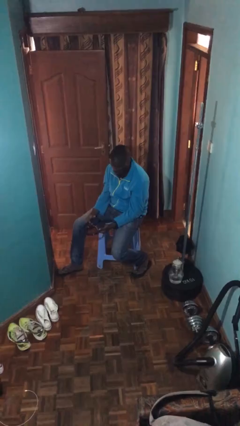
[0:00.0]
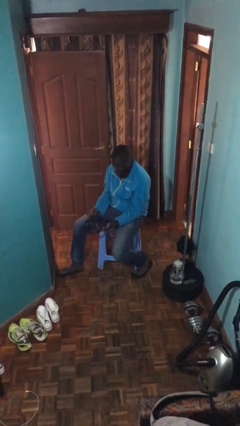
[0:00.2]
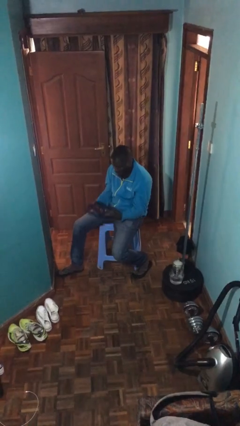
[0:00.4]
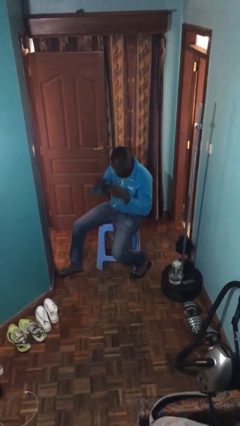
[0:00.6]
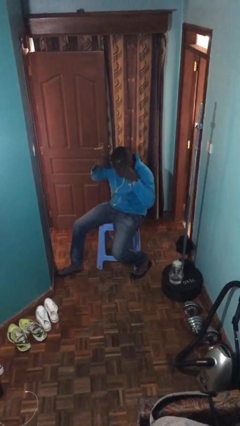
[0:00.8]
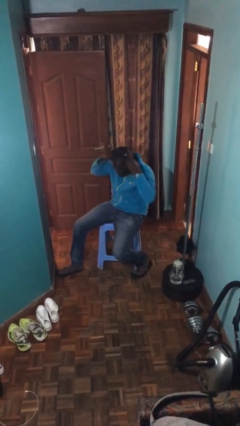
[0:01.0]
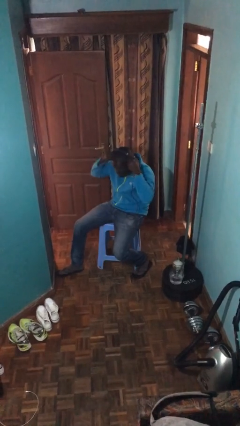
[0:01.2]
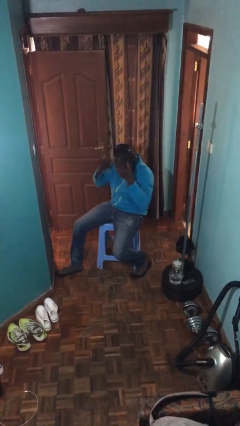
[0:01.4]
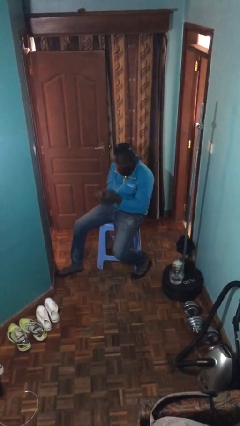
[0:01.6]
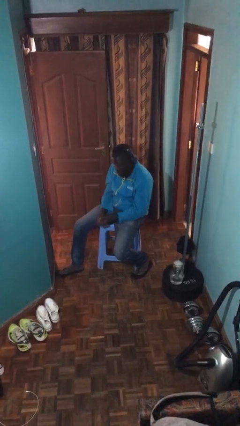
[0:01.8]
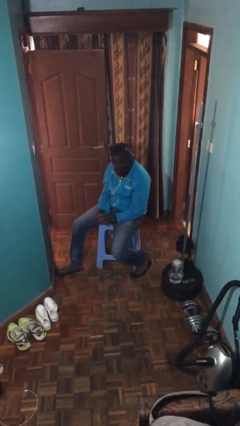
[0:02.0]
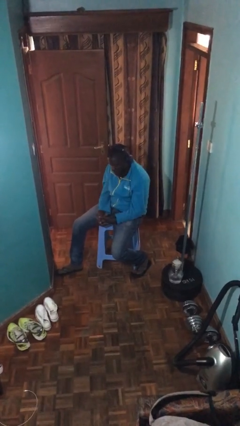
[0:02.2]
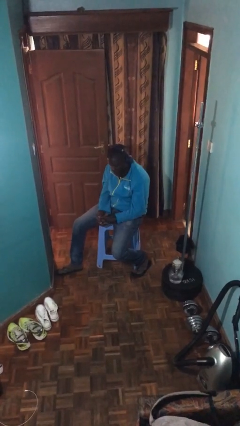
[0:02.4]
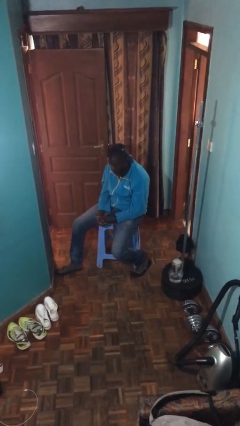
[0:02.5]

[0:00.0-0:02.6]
person puts on headphones

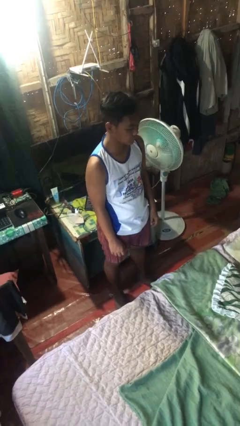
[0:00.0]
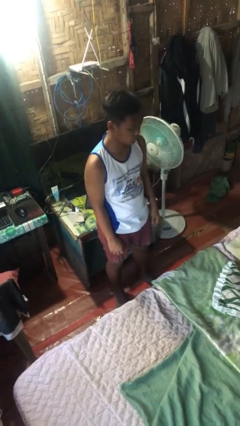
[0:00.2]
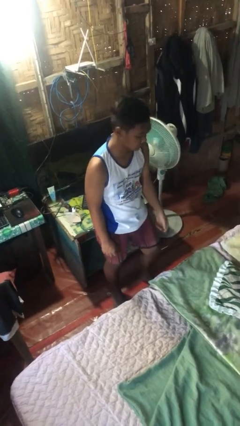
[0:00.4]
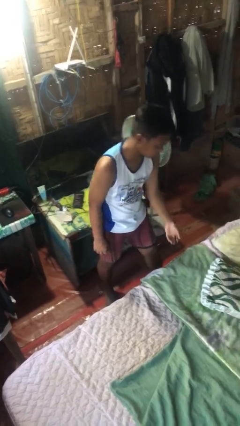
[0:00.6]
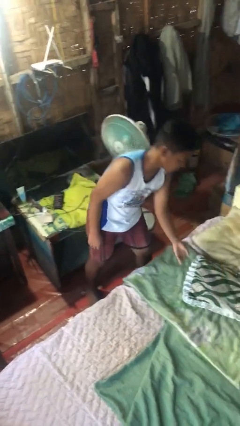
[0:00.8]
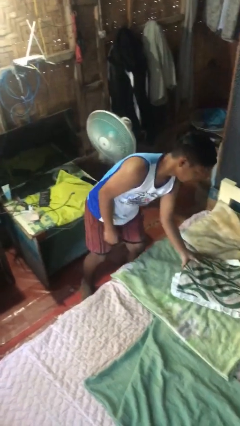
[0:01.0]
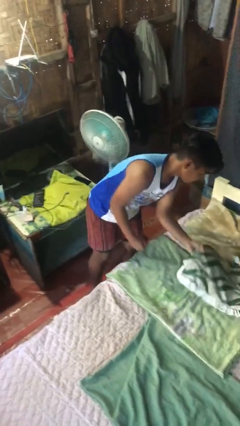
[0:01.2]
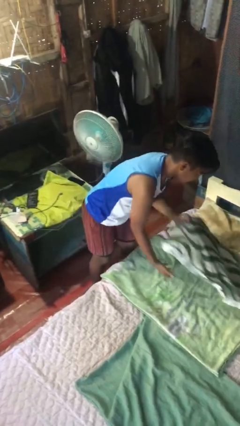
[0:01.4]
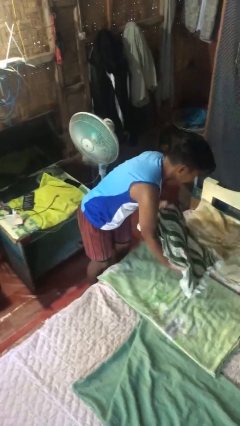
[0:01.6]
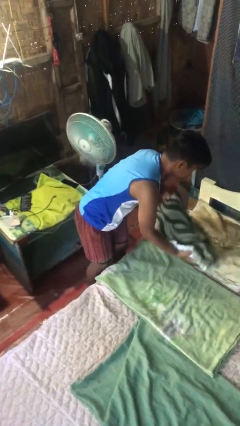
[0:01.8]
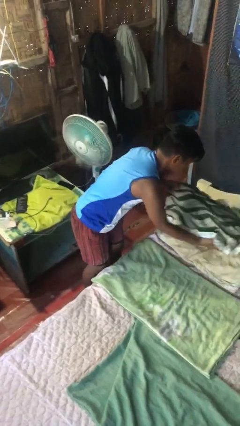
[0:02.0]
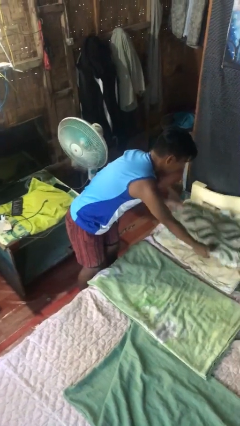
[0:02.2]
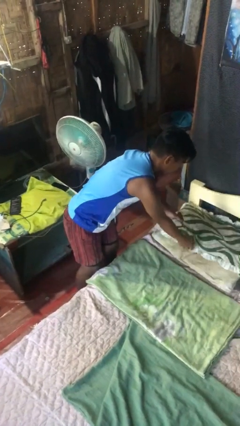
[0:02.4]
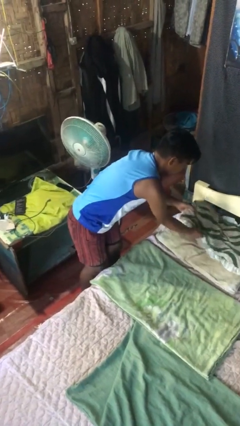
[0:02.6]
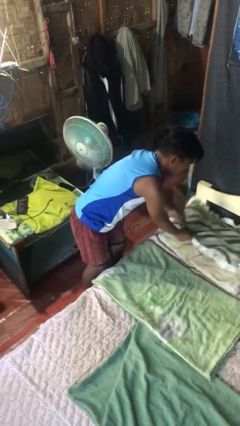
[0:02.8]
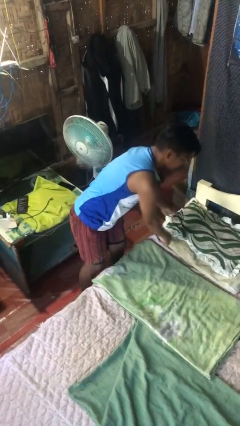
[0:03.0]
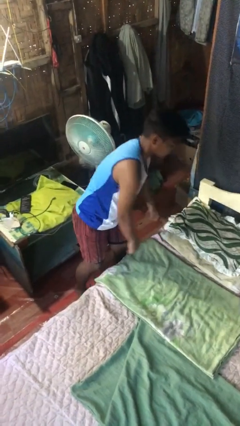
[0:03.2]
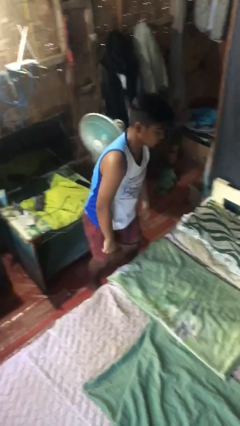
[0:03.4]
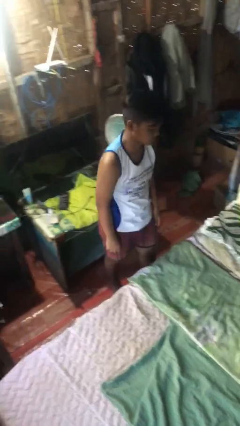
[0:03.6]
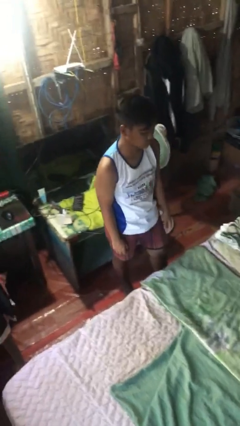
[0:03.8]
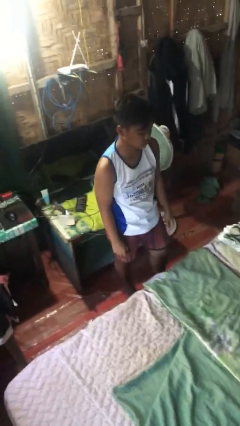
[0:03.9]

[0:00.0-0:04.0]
person makes bed

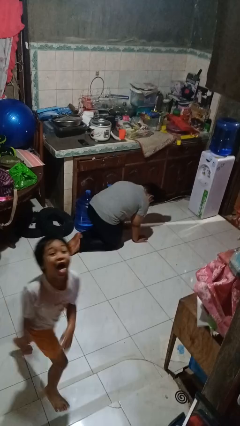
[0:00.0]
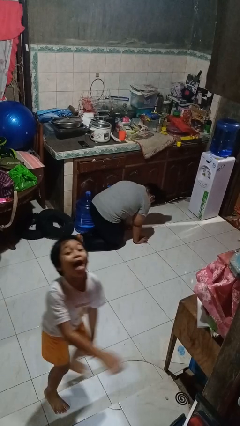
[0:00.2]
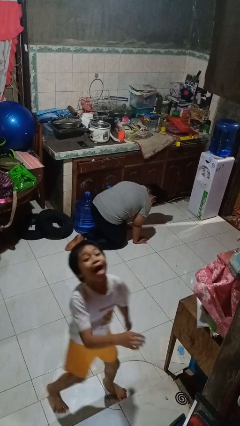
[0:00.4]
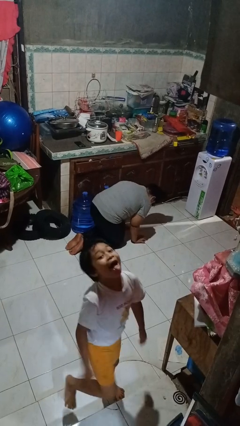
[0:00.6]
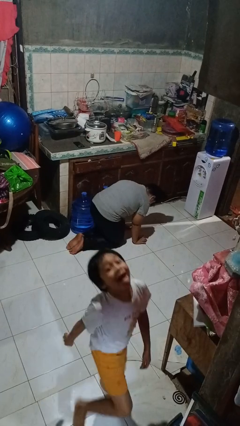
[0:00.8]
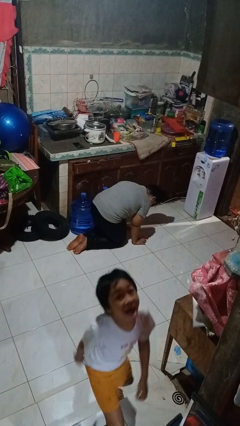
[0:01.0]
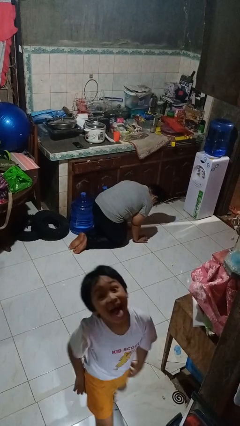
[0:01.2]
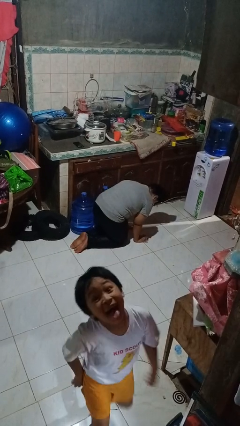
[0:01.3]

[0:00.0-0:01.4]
person crawls

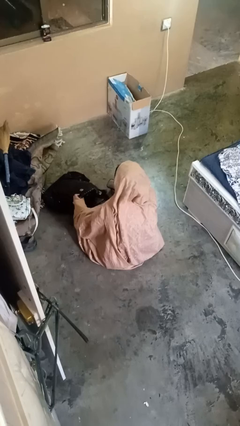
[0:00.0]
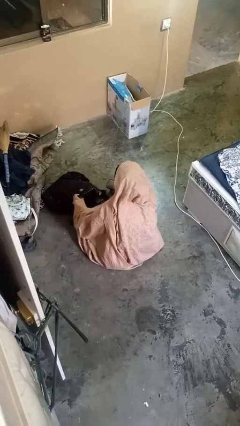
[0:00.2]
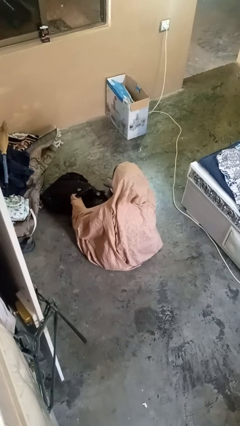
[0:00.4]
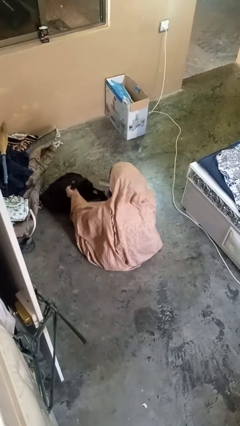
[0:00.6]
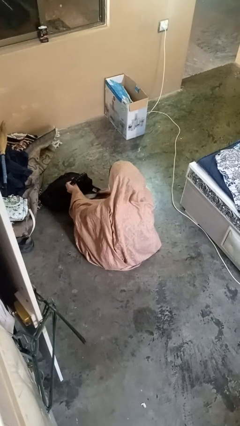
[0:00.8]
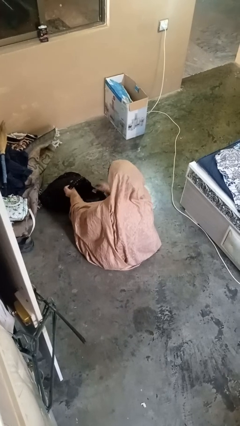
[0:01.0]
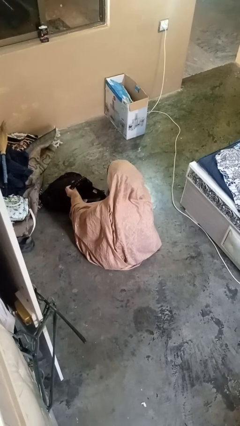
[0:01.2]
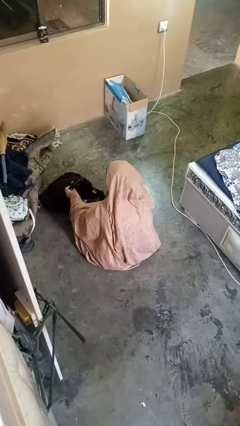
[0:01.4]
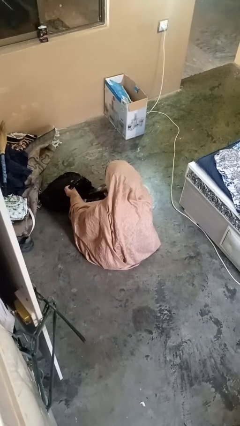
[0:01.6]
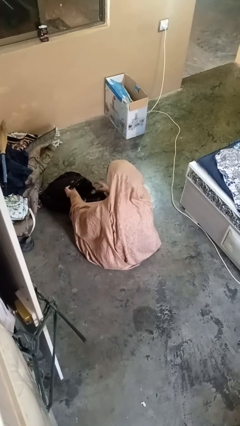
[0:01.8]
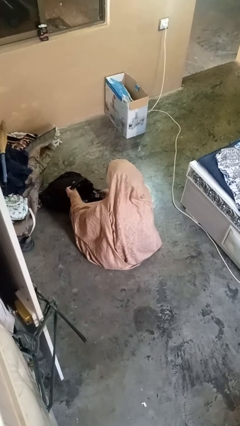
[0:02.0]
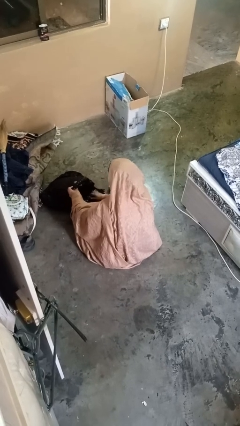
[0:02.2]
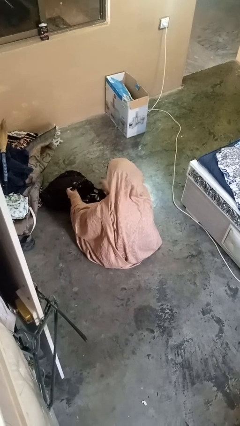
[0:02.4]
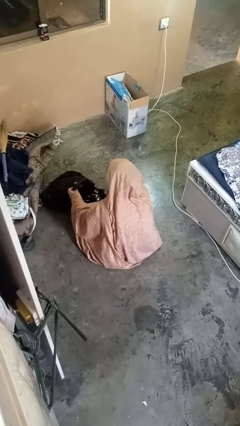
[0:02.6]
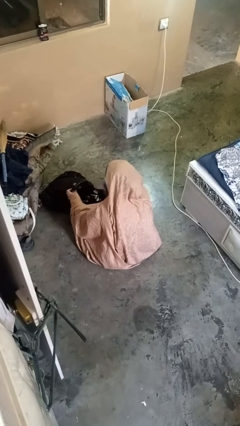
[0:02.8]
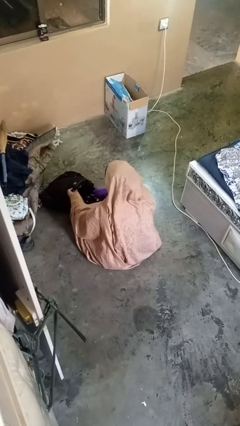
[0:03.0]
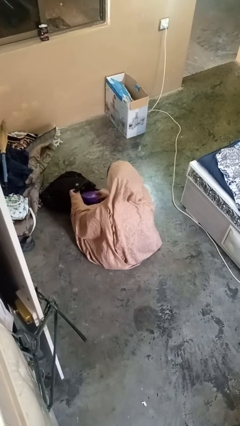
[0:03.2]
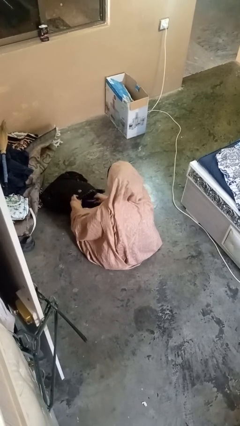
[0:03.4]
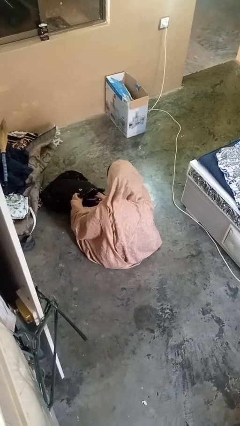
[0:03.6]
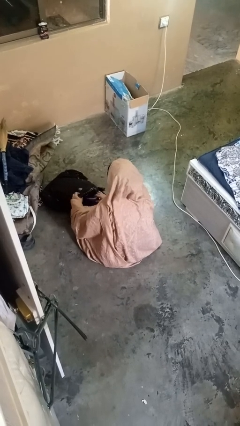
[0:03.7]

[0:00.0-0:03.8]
person puts object into backpack

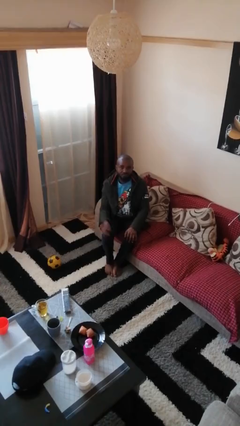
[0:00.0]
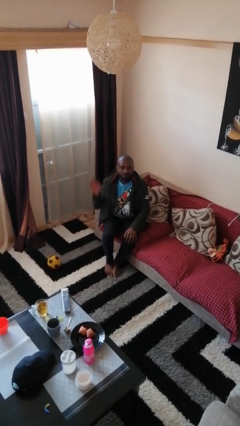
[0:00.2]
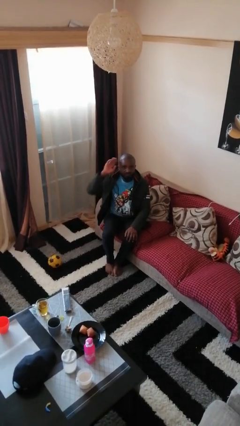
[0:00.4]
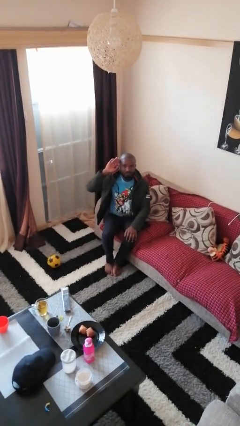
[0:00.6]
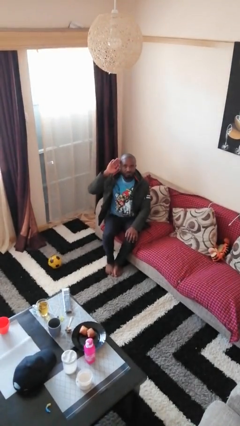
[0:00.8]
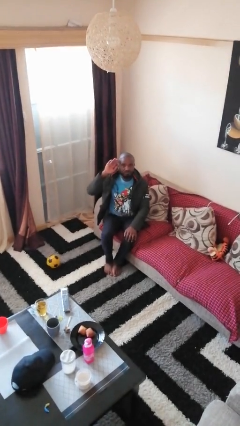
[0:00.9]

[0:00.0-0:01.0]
person salutes

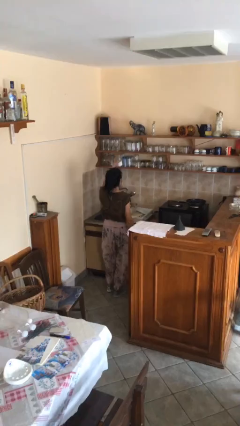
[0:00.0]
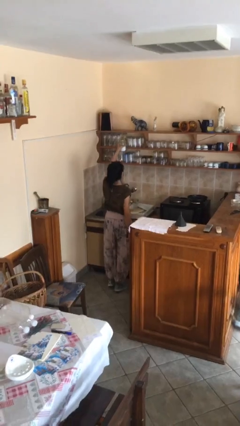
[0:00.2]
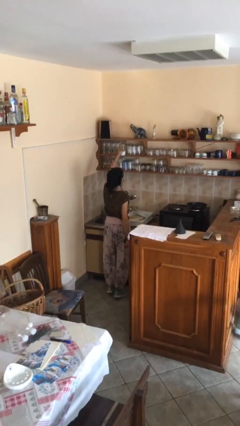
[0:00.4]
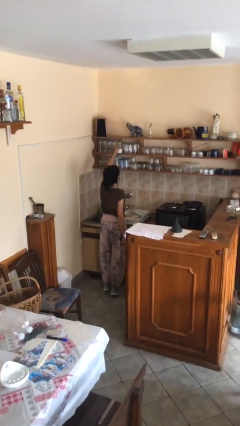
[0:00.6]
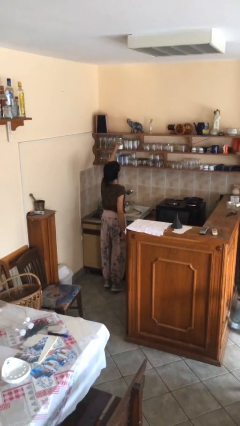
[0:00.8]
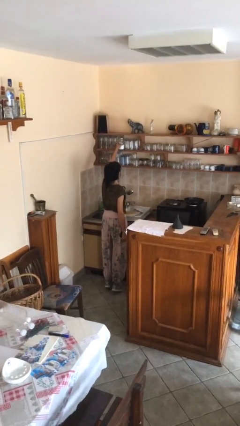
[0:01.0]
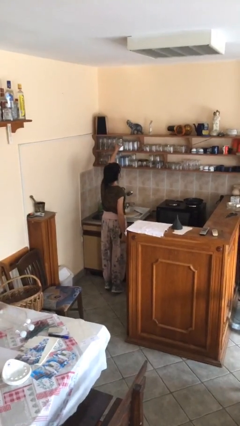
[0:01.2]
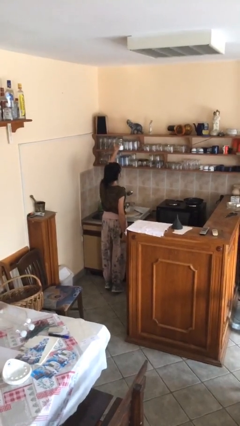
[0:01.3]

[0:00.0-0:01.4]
person puts down object on shelf

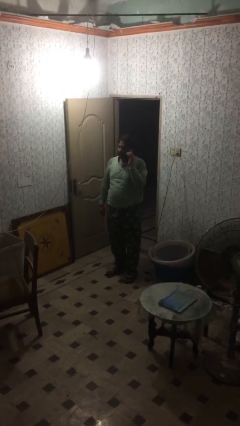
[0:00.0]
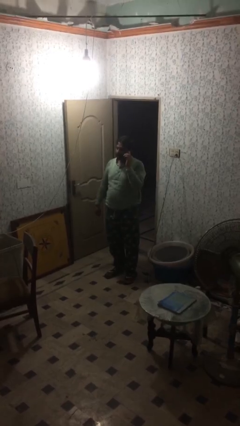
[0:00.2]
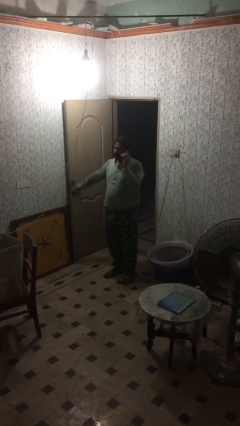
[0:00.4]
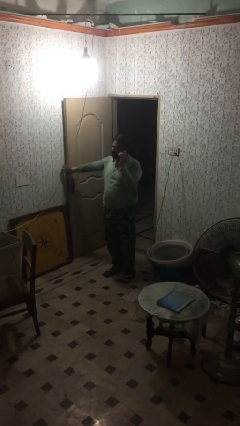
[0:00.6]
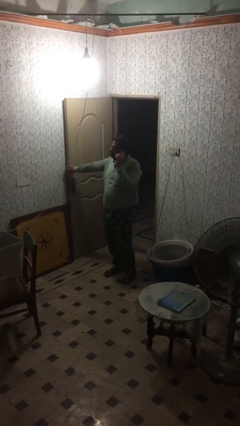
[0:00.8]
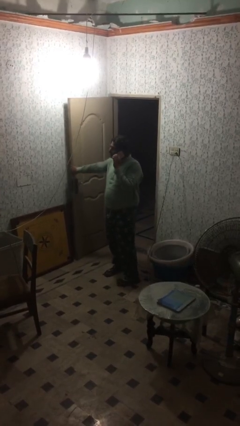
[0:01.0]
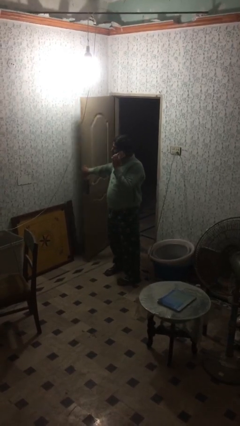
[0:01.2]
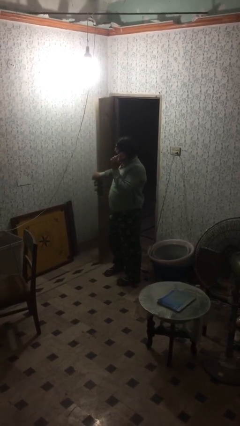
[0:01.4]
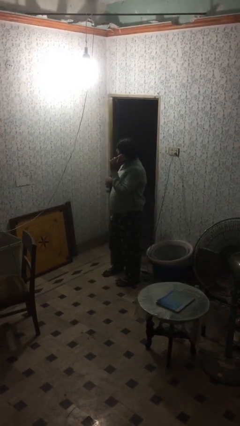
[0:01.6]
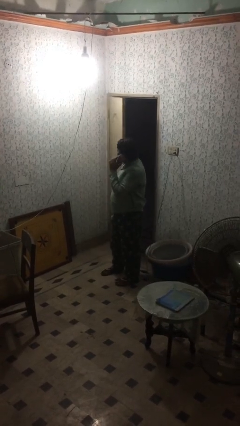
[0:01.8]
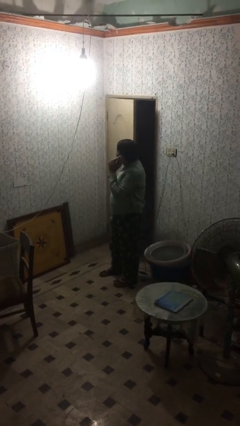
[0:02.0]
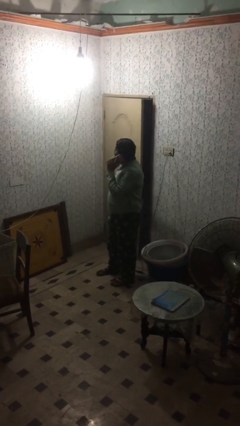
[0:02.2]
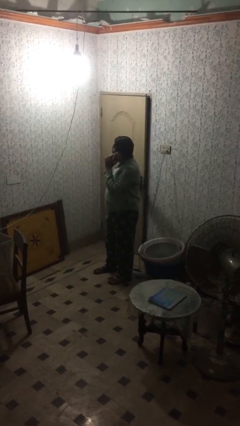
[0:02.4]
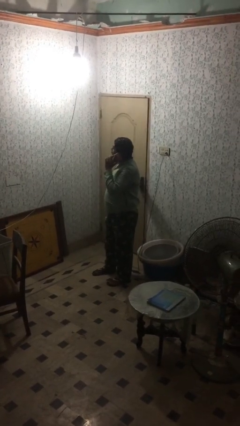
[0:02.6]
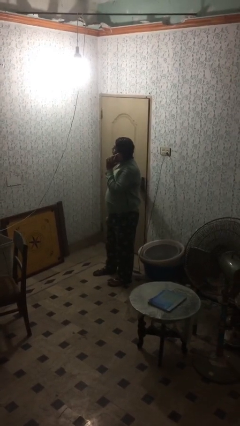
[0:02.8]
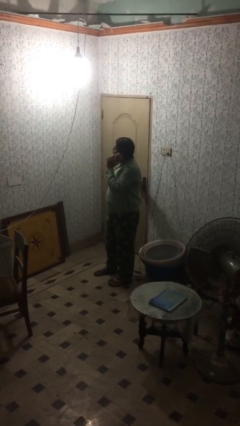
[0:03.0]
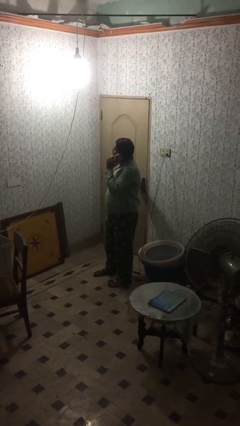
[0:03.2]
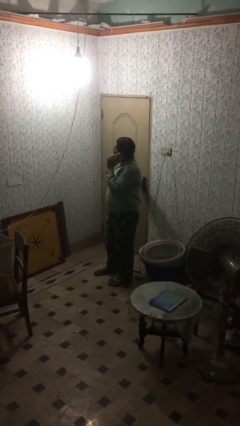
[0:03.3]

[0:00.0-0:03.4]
person closes facility door
